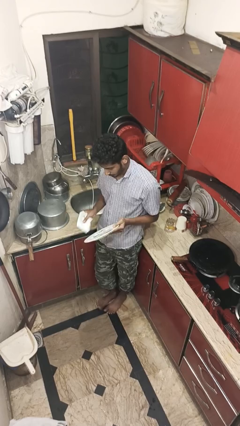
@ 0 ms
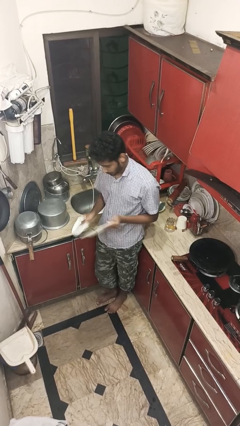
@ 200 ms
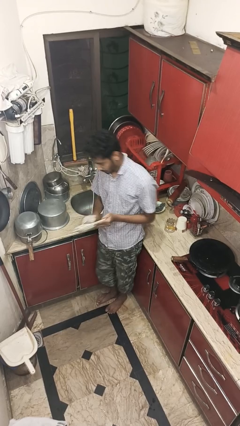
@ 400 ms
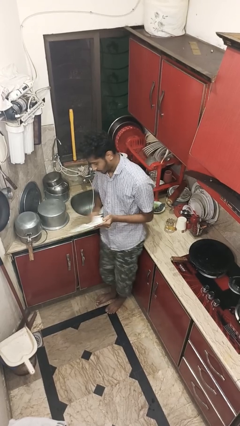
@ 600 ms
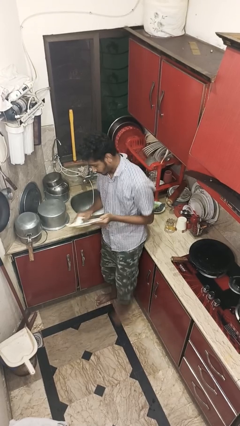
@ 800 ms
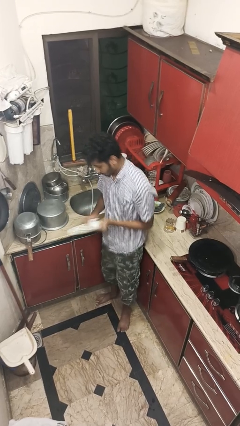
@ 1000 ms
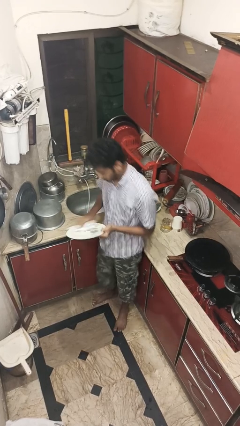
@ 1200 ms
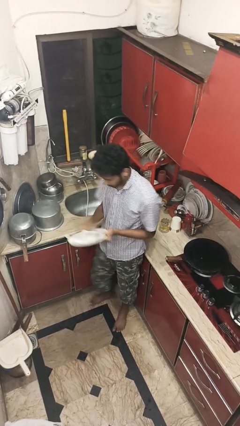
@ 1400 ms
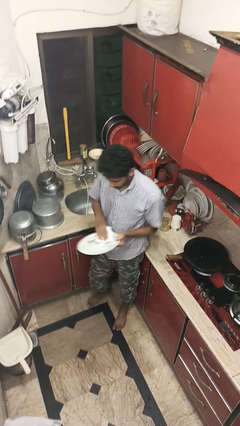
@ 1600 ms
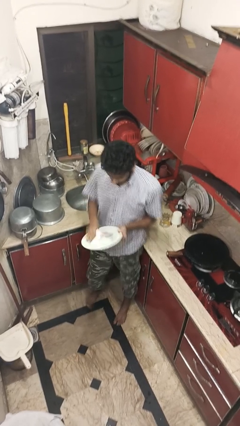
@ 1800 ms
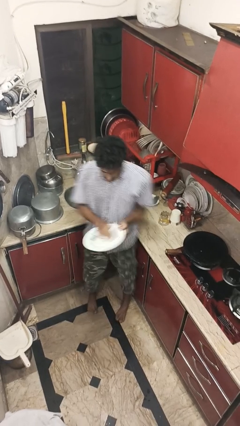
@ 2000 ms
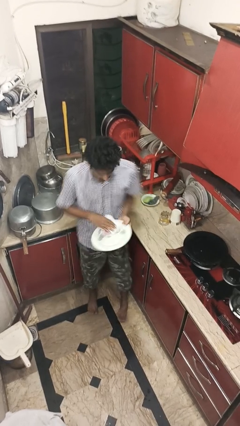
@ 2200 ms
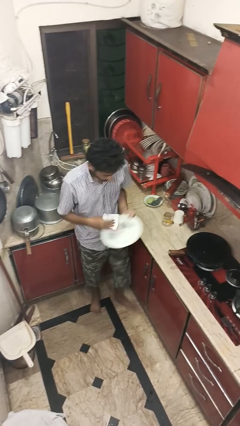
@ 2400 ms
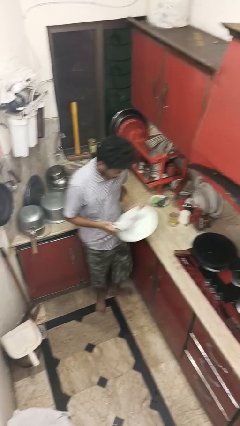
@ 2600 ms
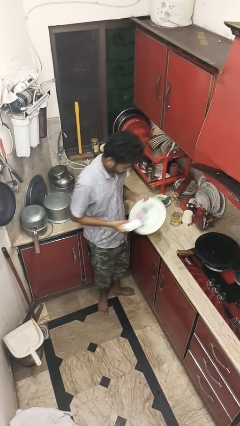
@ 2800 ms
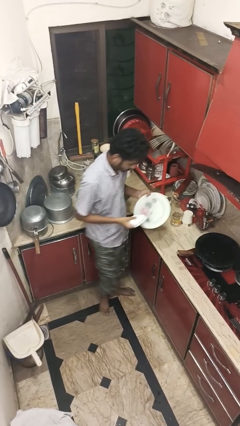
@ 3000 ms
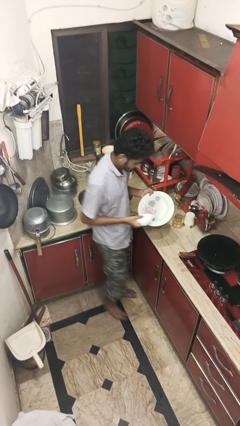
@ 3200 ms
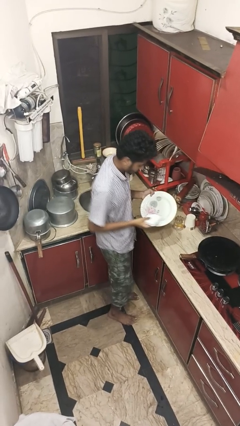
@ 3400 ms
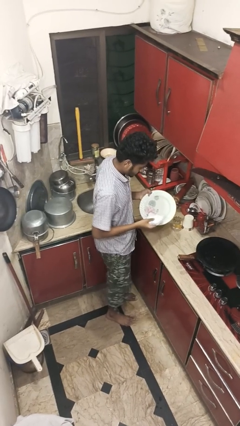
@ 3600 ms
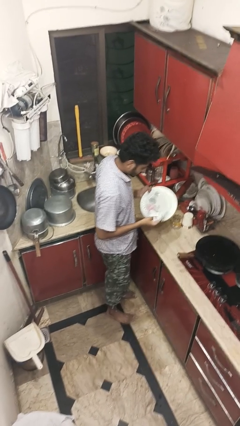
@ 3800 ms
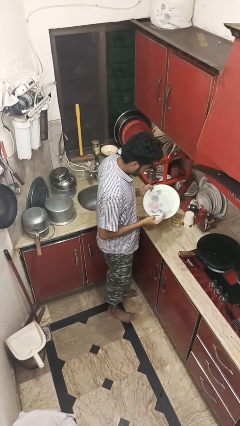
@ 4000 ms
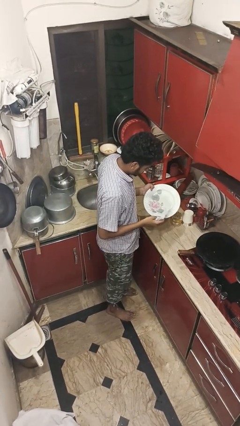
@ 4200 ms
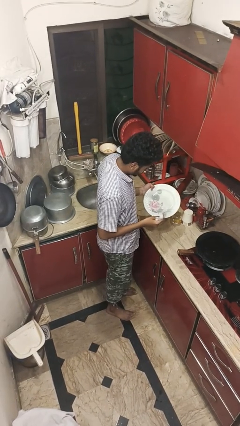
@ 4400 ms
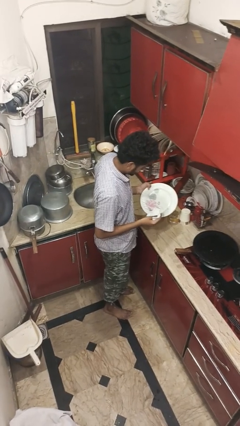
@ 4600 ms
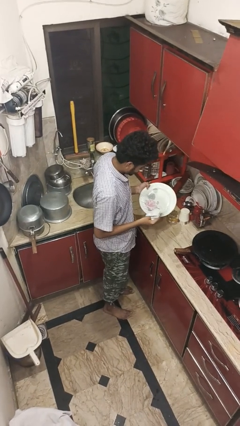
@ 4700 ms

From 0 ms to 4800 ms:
person dries dish

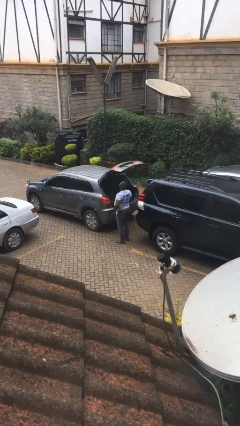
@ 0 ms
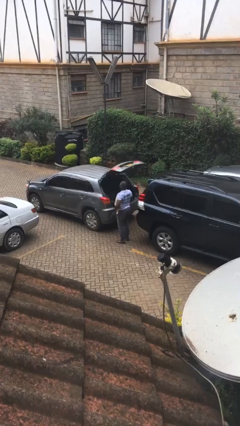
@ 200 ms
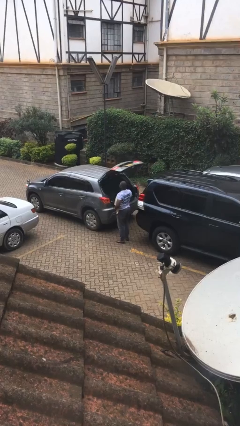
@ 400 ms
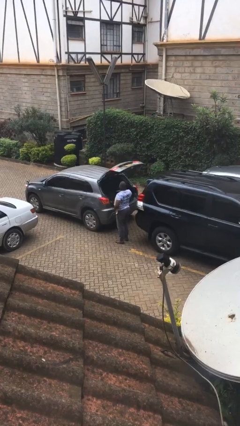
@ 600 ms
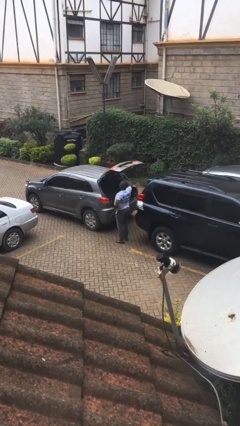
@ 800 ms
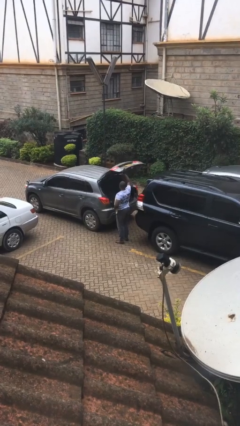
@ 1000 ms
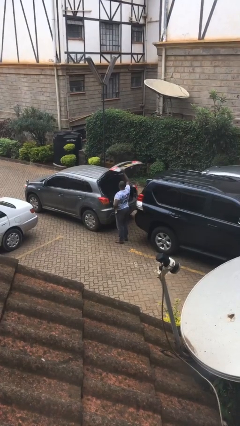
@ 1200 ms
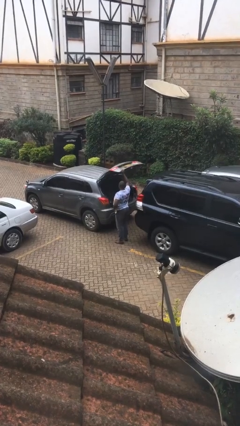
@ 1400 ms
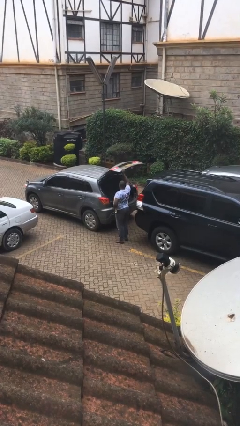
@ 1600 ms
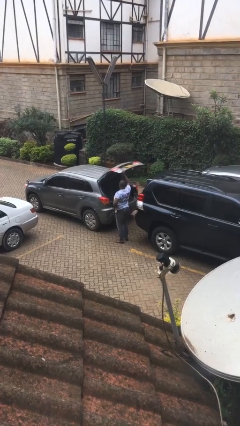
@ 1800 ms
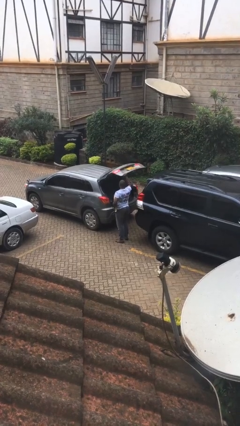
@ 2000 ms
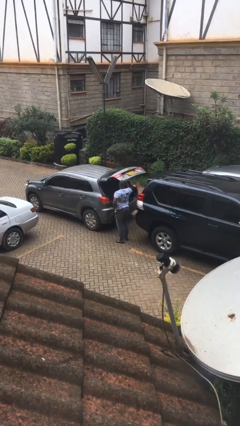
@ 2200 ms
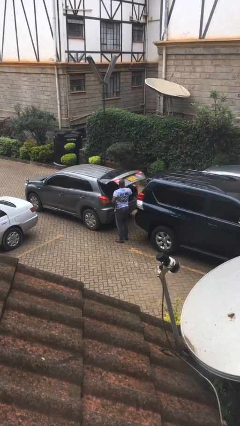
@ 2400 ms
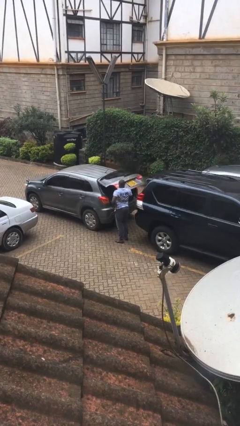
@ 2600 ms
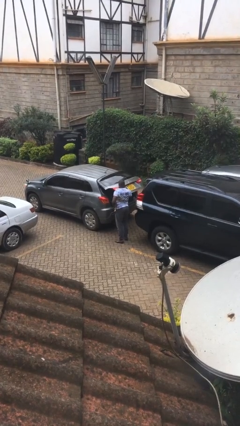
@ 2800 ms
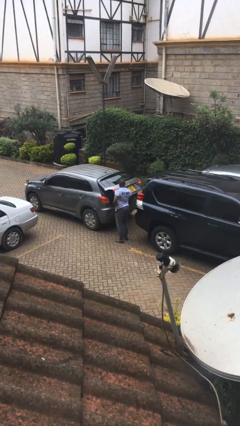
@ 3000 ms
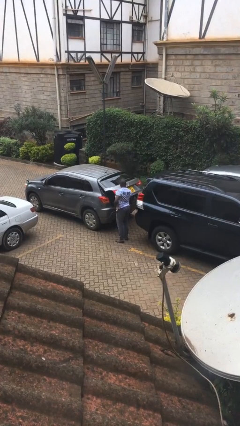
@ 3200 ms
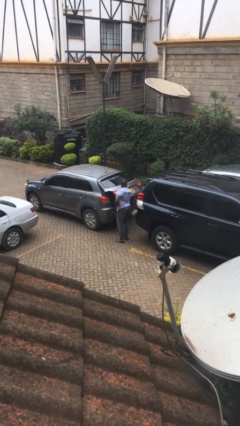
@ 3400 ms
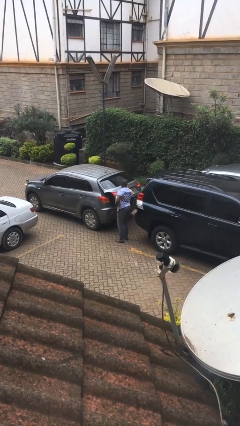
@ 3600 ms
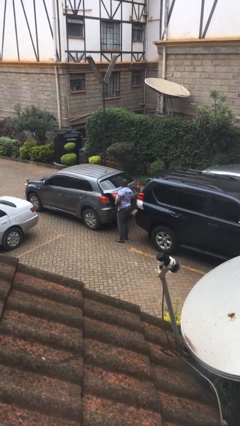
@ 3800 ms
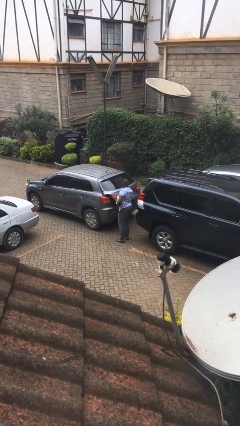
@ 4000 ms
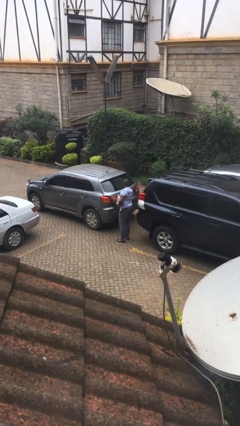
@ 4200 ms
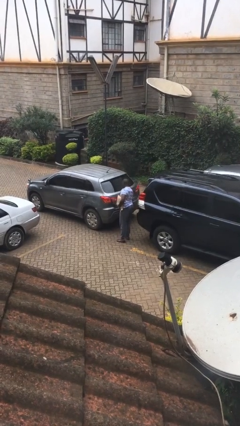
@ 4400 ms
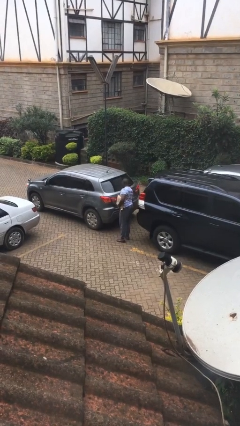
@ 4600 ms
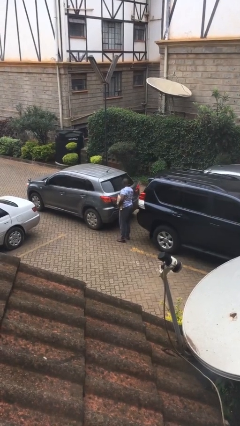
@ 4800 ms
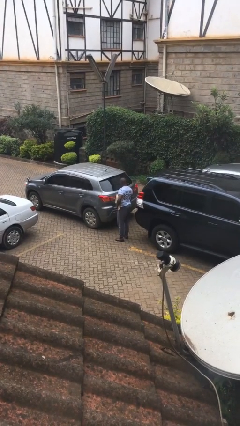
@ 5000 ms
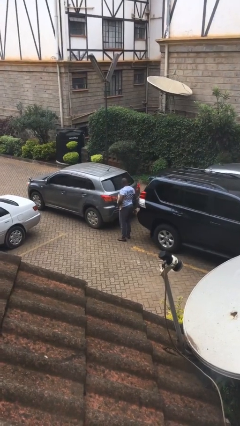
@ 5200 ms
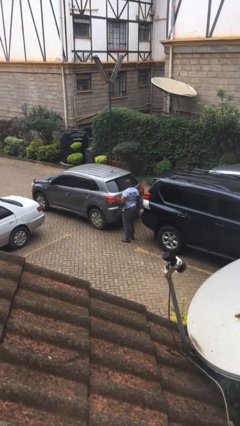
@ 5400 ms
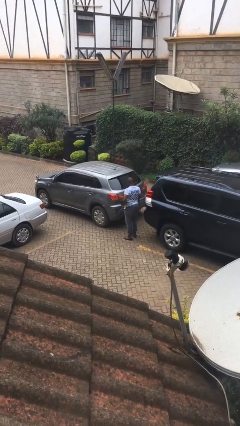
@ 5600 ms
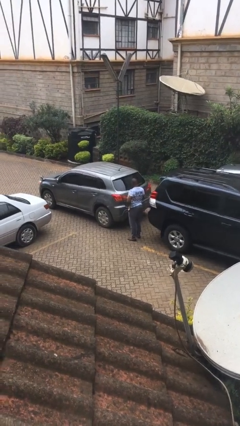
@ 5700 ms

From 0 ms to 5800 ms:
person closes car trunk

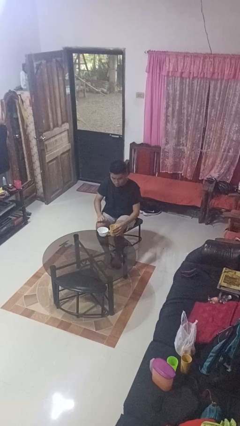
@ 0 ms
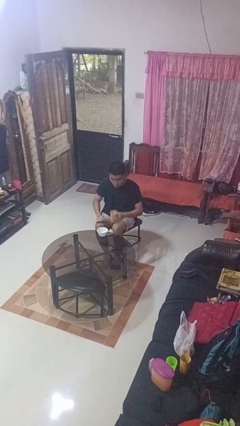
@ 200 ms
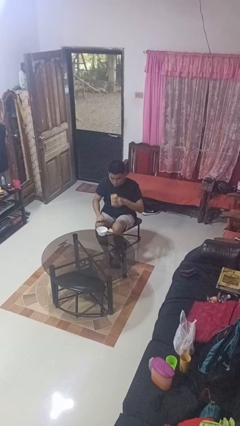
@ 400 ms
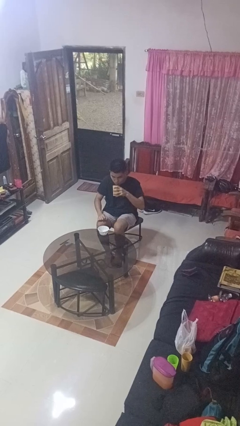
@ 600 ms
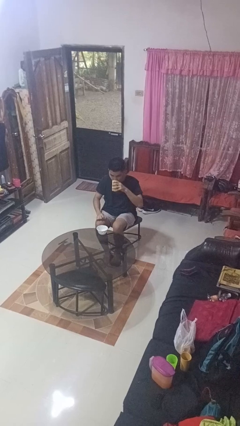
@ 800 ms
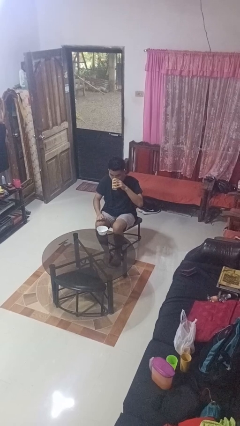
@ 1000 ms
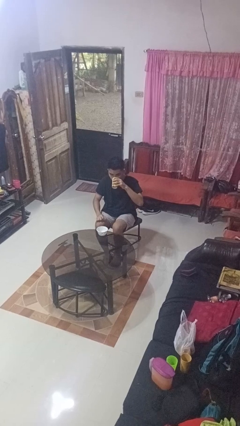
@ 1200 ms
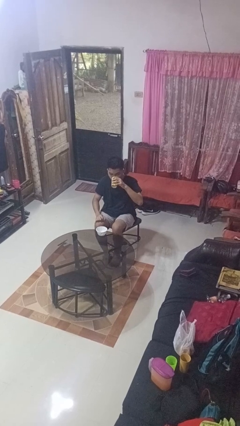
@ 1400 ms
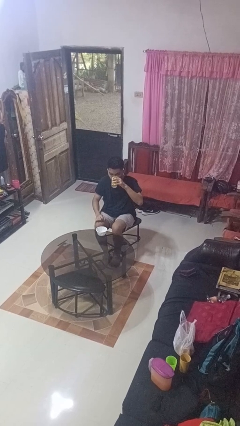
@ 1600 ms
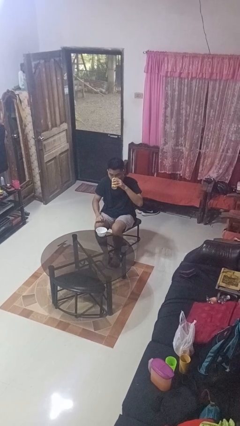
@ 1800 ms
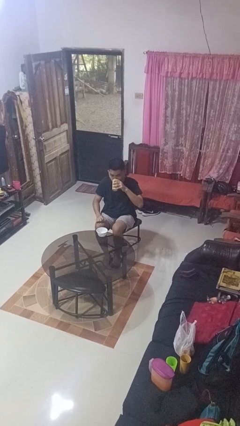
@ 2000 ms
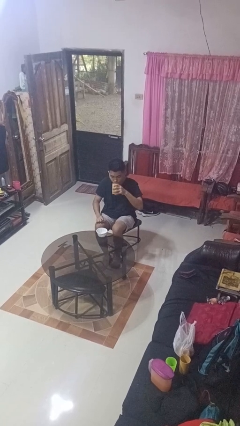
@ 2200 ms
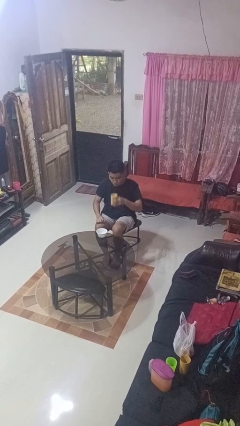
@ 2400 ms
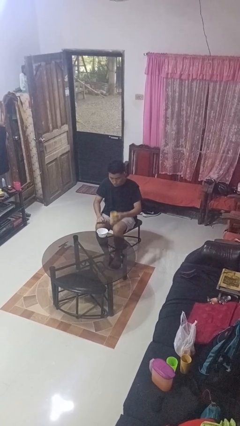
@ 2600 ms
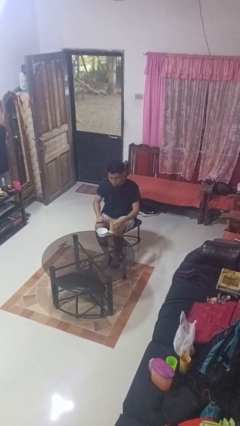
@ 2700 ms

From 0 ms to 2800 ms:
person drinks from cup

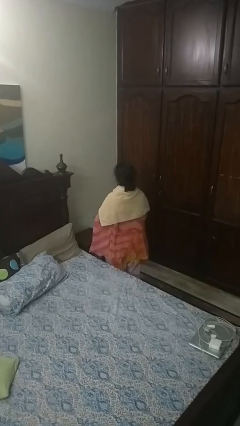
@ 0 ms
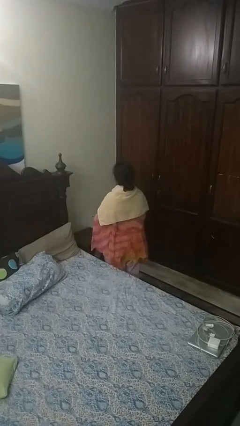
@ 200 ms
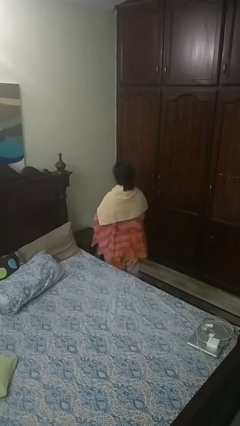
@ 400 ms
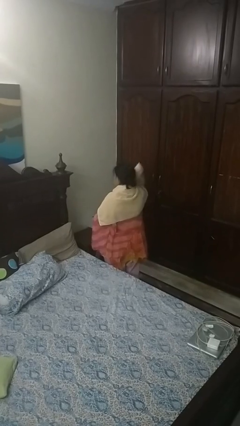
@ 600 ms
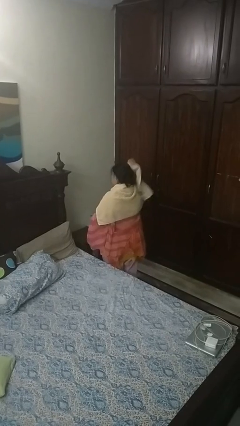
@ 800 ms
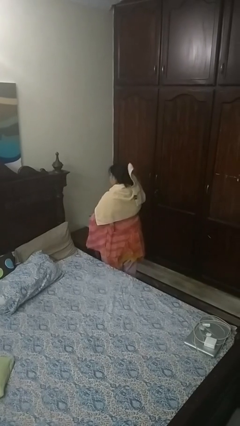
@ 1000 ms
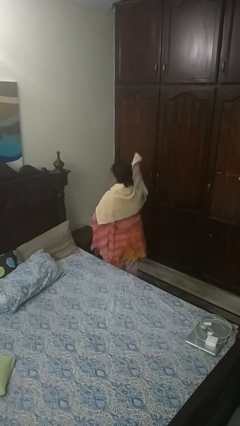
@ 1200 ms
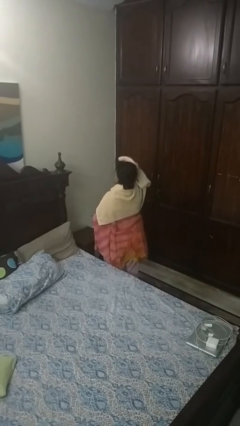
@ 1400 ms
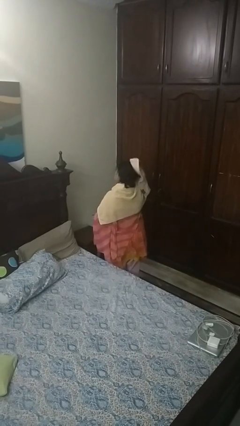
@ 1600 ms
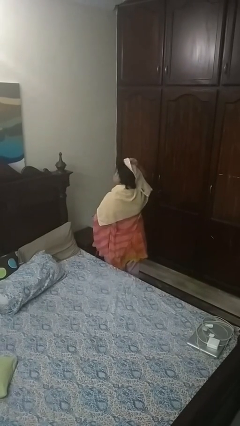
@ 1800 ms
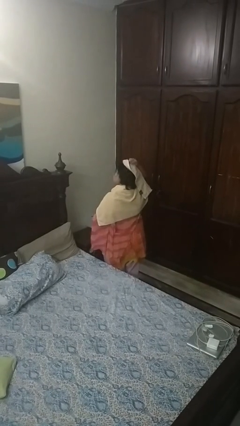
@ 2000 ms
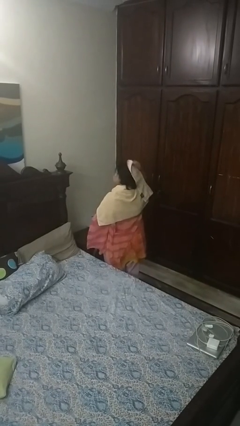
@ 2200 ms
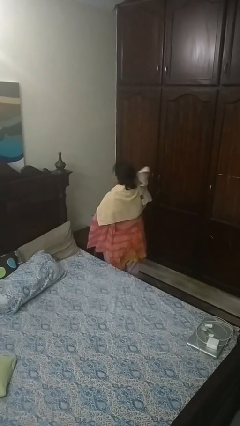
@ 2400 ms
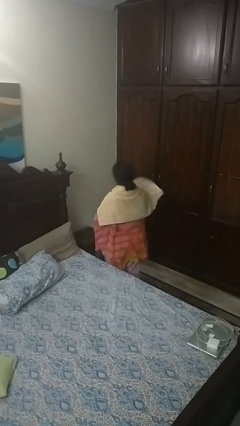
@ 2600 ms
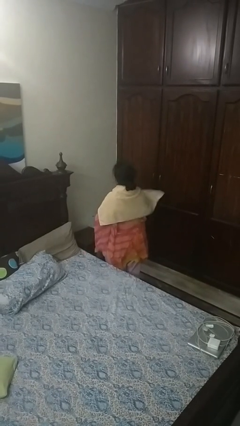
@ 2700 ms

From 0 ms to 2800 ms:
person dries hair with towel

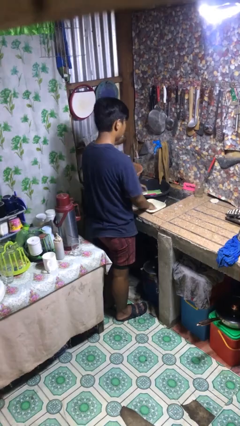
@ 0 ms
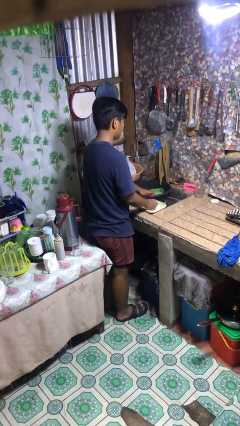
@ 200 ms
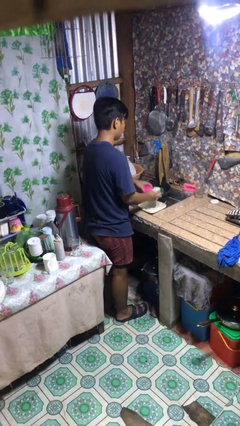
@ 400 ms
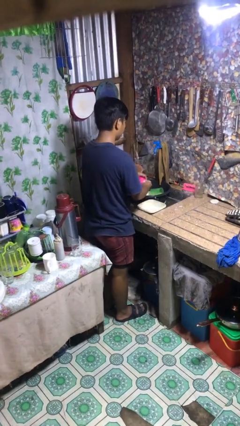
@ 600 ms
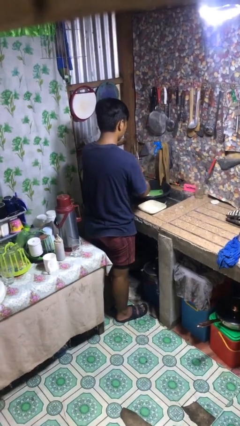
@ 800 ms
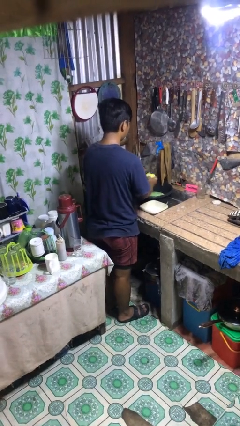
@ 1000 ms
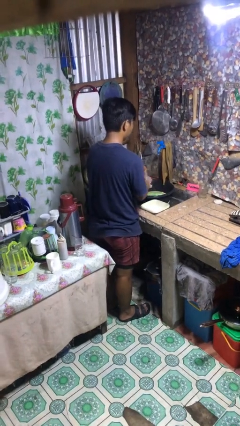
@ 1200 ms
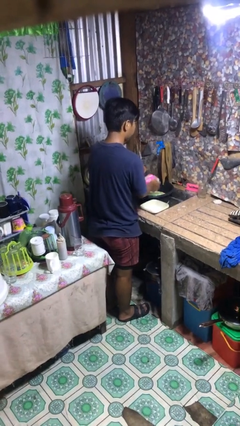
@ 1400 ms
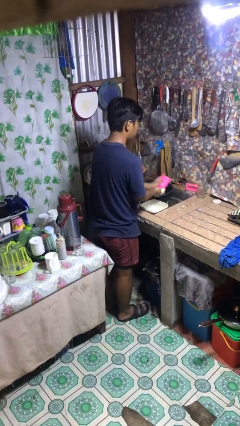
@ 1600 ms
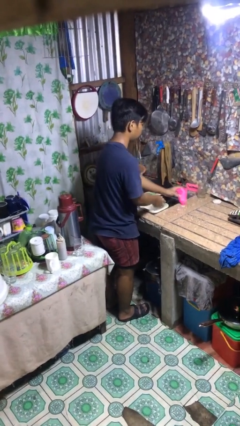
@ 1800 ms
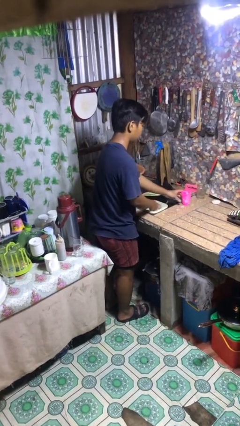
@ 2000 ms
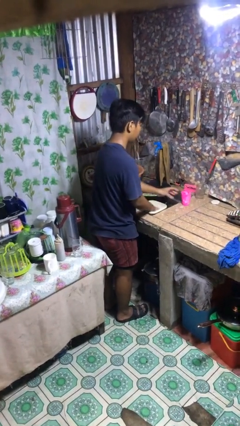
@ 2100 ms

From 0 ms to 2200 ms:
person washes dish
